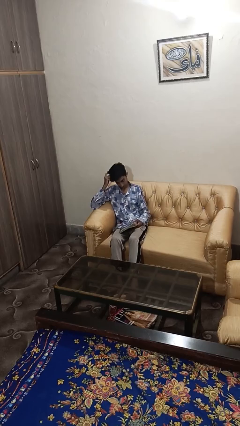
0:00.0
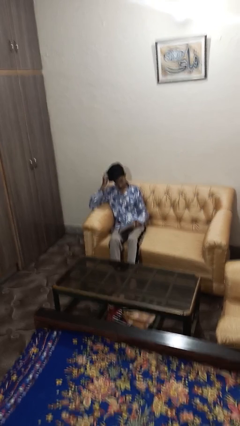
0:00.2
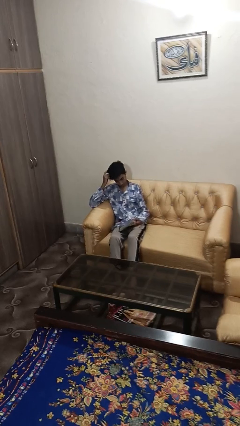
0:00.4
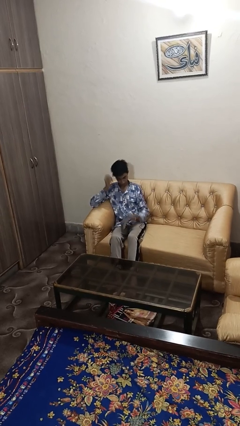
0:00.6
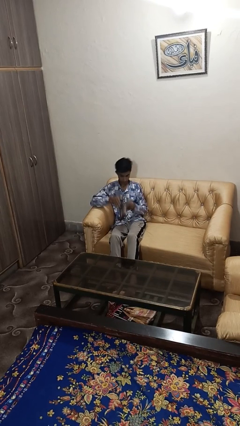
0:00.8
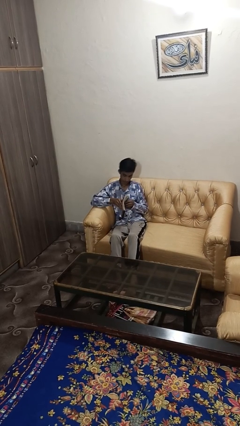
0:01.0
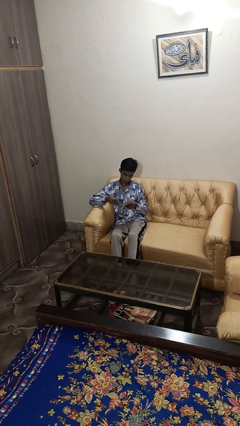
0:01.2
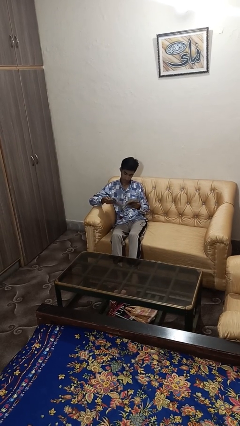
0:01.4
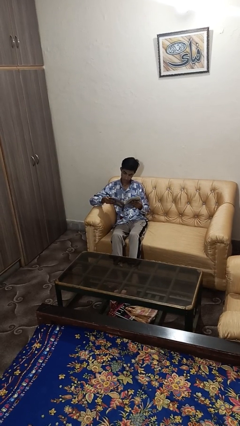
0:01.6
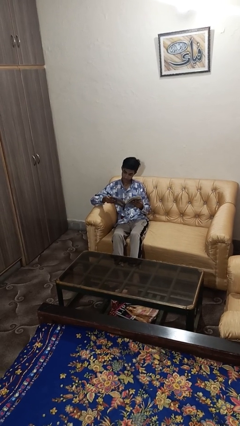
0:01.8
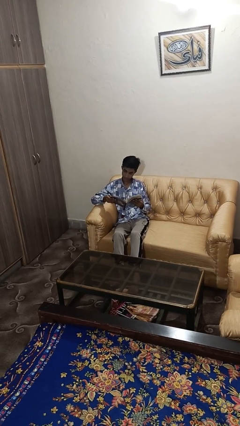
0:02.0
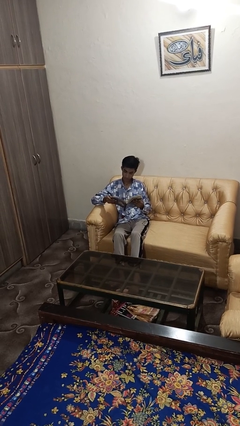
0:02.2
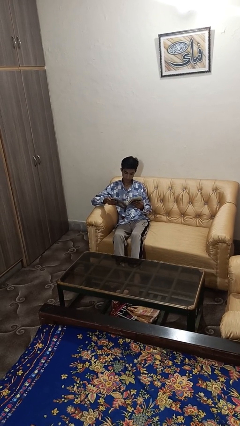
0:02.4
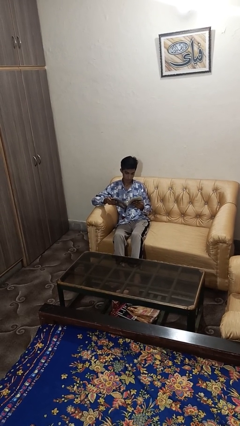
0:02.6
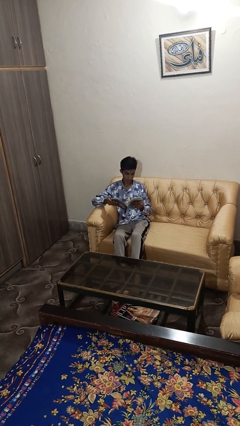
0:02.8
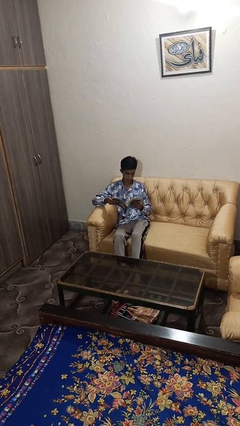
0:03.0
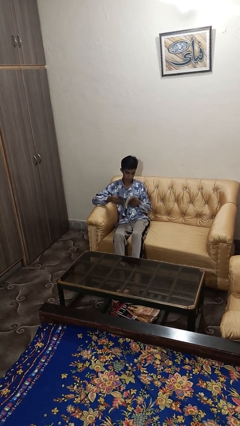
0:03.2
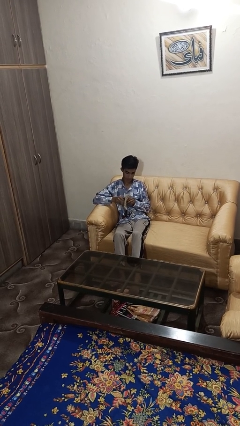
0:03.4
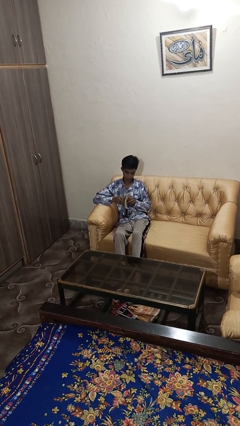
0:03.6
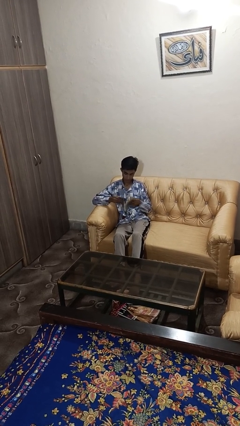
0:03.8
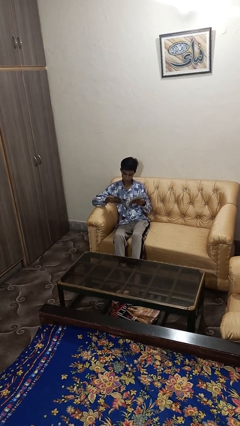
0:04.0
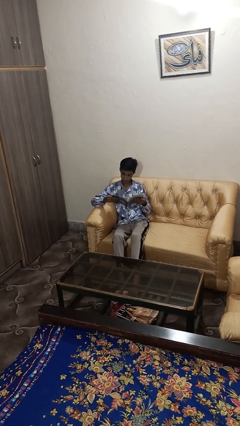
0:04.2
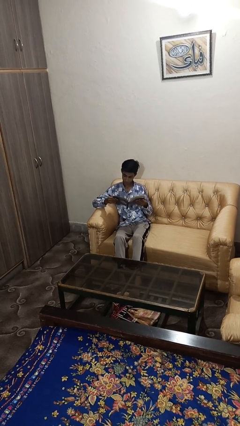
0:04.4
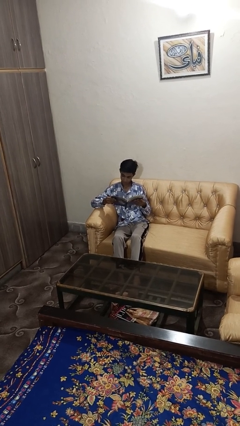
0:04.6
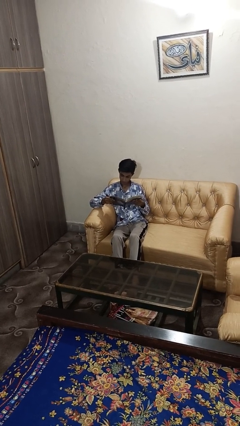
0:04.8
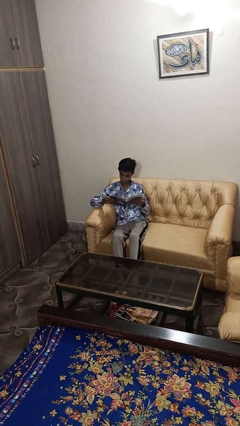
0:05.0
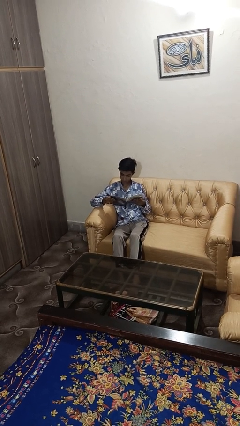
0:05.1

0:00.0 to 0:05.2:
person reads book

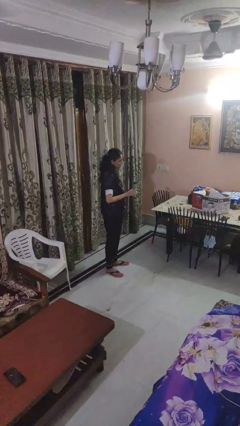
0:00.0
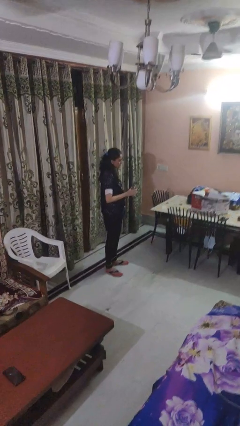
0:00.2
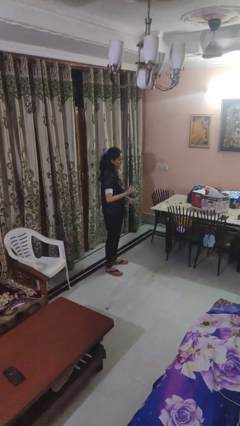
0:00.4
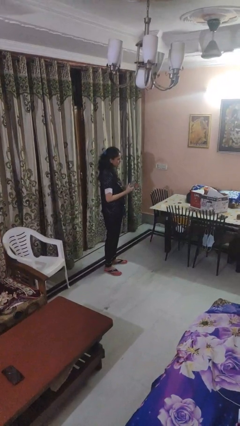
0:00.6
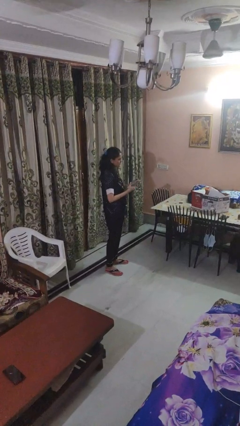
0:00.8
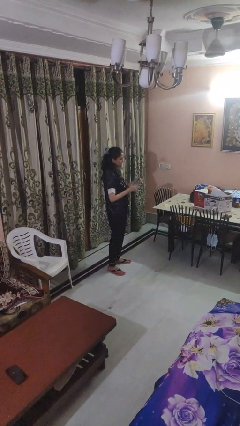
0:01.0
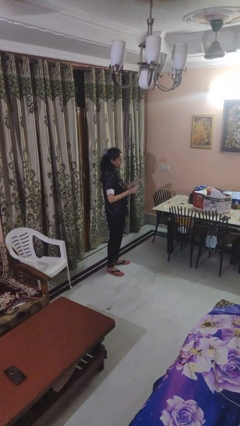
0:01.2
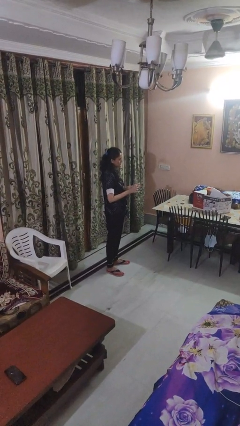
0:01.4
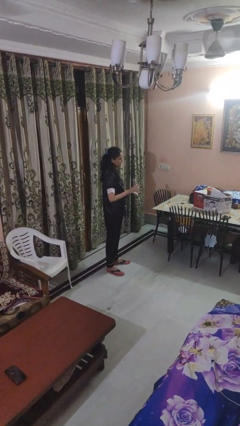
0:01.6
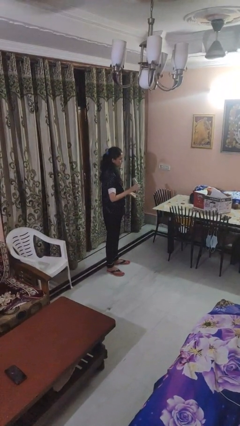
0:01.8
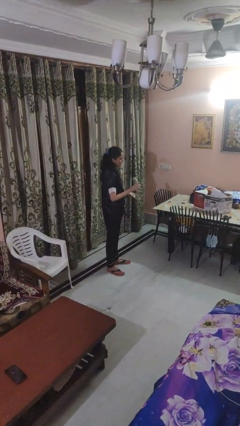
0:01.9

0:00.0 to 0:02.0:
person unscrews lid from bottle

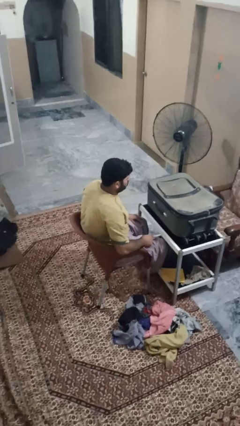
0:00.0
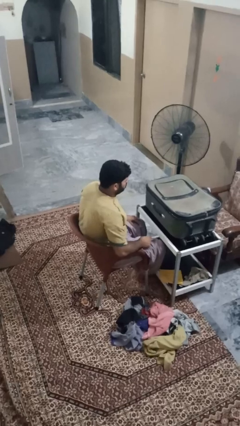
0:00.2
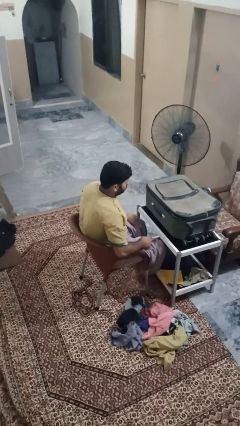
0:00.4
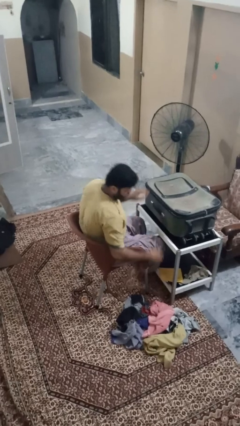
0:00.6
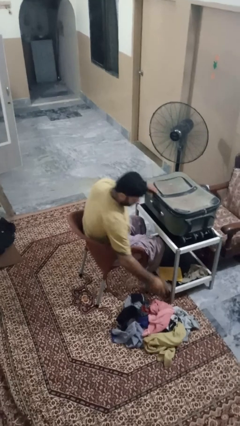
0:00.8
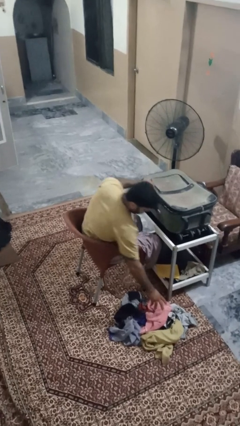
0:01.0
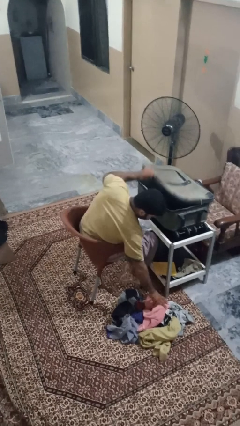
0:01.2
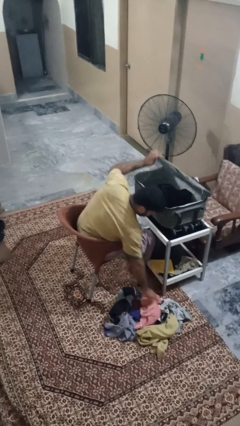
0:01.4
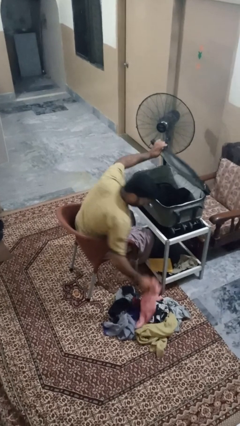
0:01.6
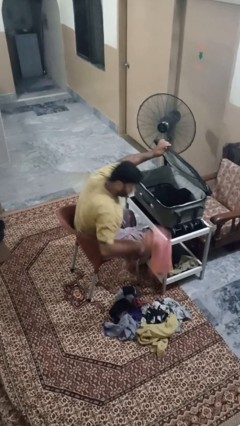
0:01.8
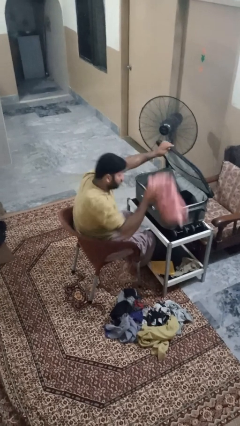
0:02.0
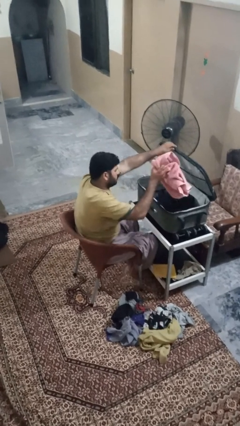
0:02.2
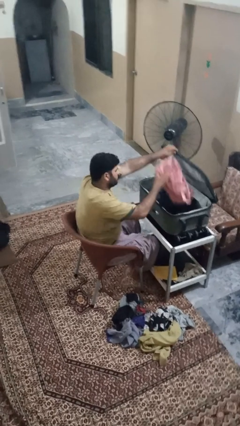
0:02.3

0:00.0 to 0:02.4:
person loads clothes into suitcase

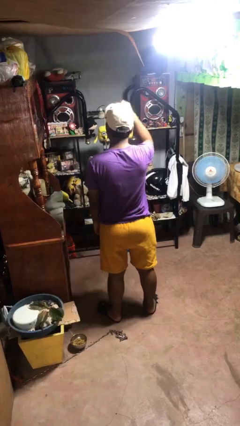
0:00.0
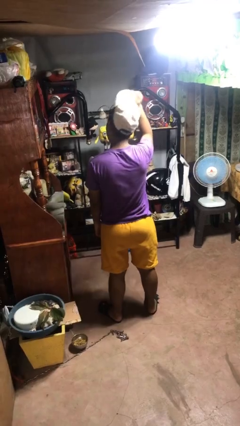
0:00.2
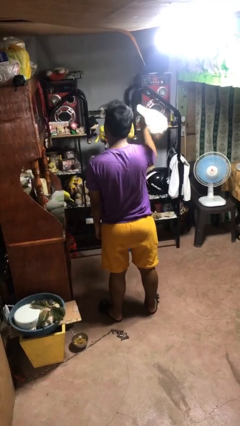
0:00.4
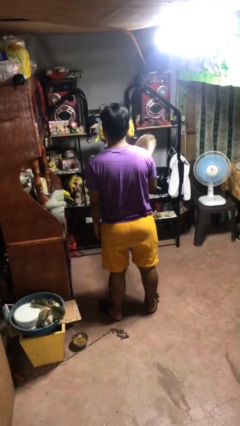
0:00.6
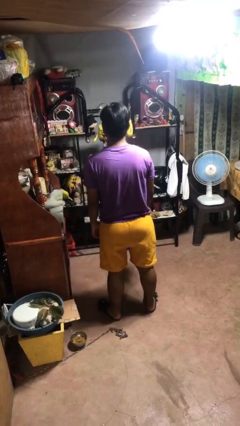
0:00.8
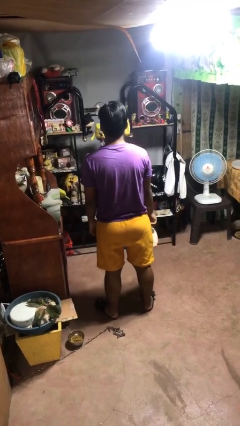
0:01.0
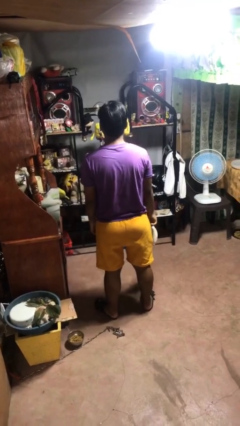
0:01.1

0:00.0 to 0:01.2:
person takes off hat

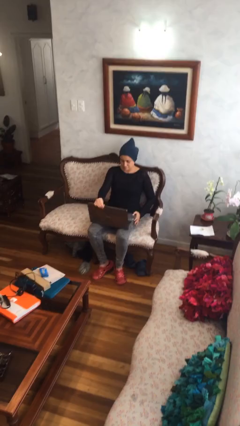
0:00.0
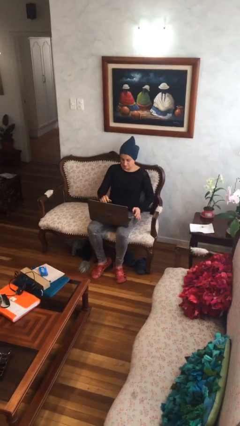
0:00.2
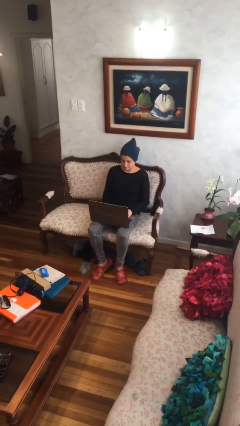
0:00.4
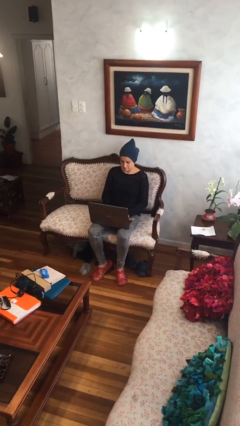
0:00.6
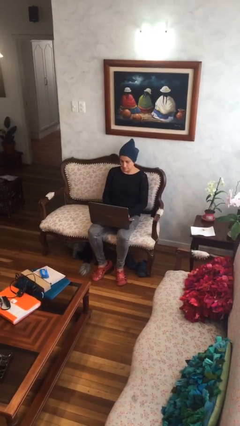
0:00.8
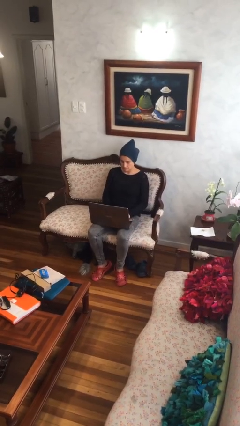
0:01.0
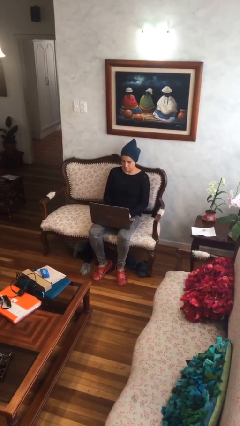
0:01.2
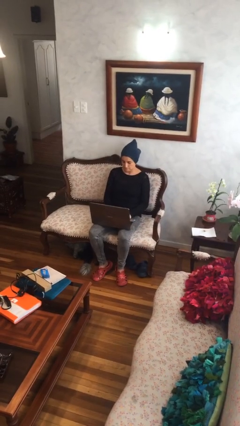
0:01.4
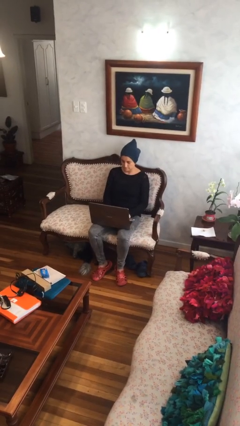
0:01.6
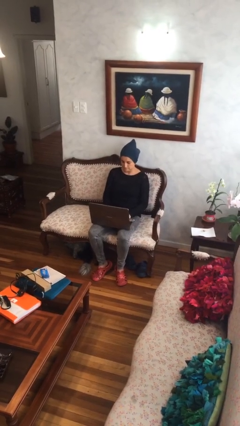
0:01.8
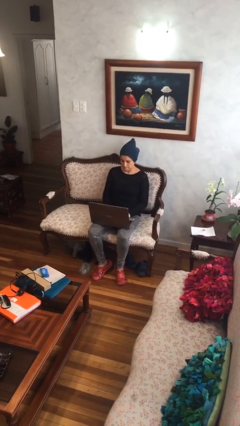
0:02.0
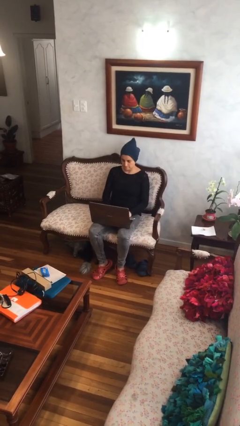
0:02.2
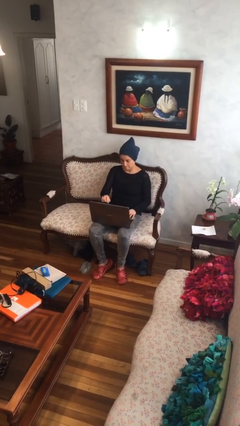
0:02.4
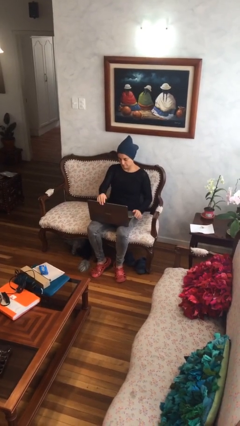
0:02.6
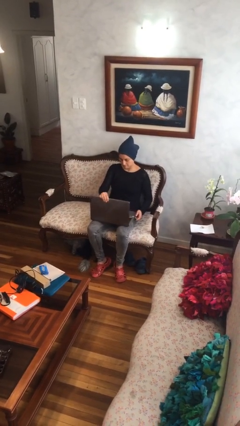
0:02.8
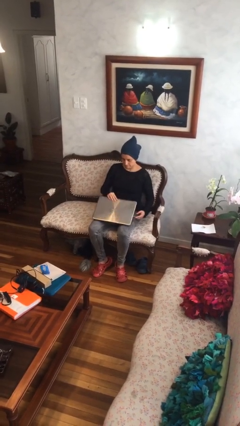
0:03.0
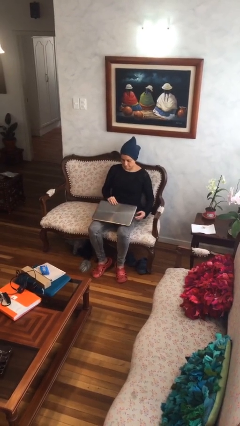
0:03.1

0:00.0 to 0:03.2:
person interacts with laptop

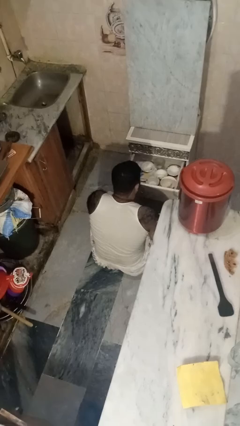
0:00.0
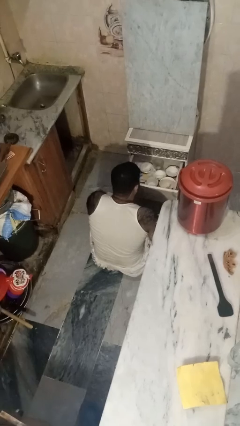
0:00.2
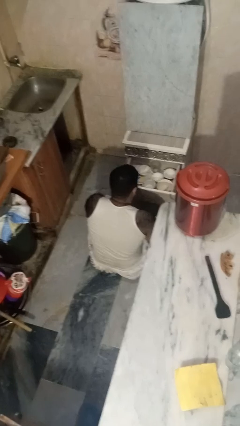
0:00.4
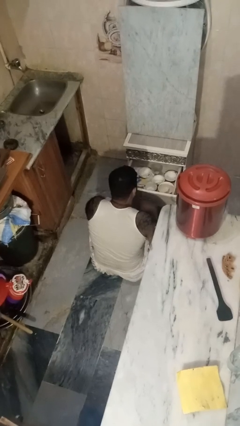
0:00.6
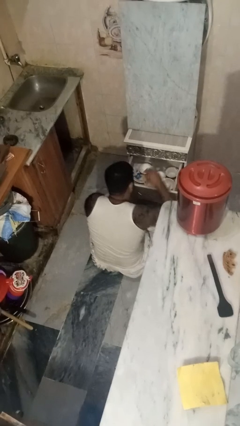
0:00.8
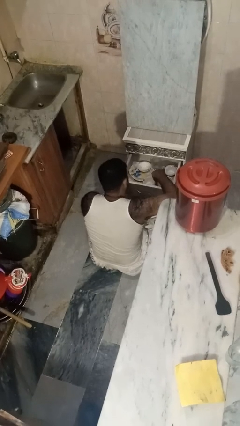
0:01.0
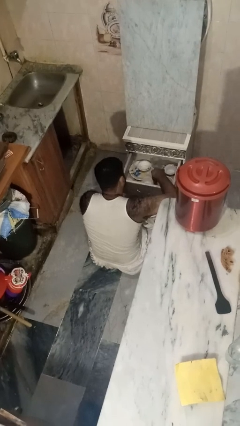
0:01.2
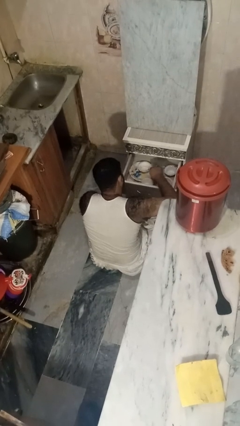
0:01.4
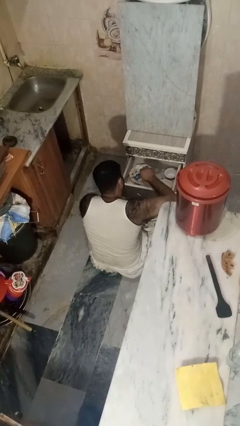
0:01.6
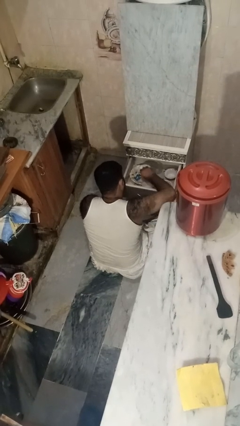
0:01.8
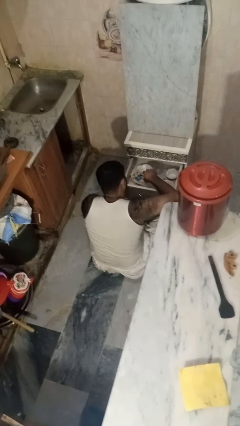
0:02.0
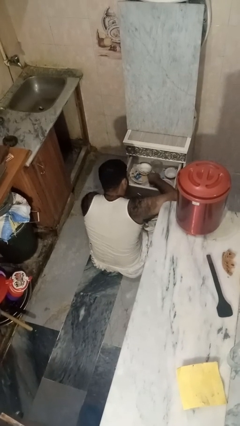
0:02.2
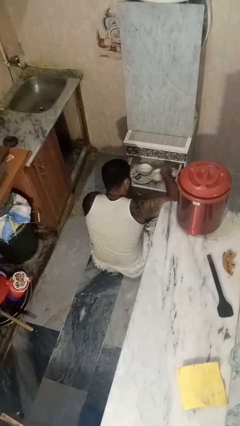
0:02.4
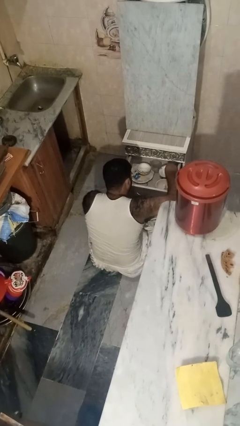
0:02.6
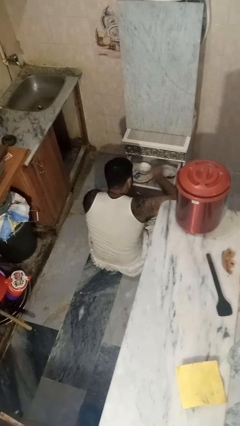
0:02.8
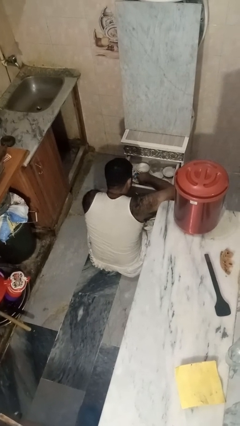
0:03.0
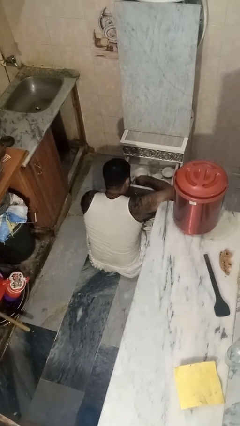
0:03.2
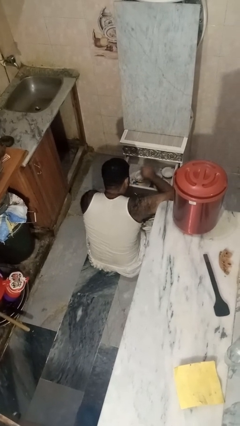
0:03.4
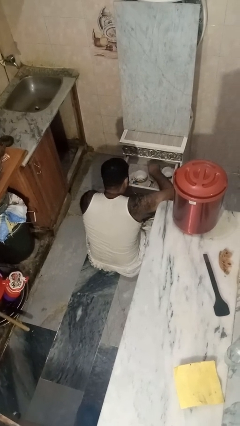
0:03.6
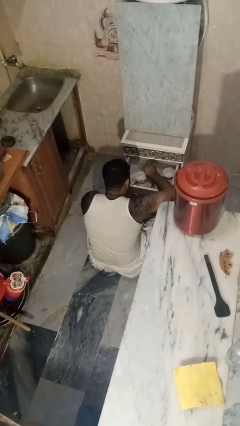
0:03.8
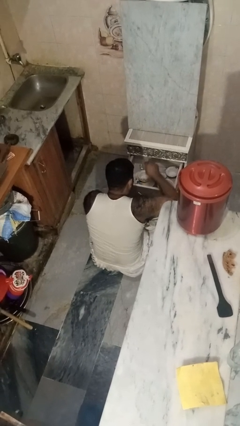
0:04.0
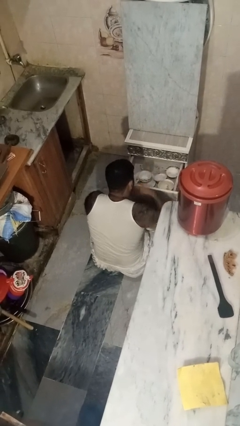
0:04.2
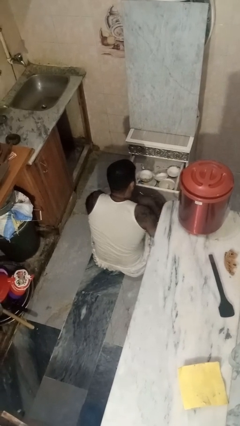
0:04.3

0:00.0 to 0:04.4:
person searches in kitchen drawer
